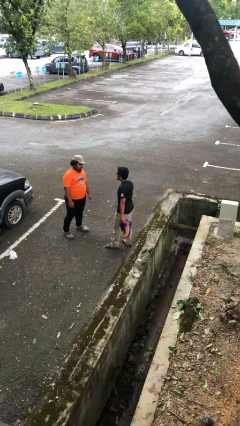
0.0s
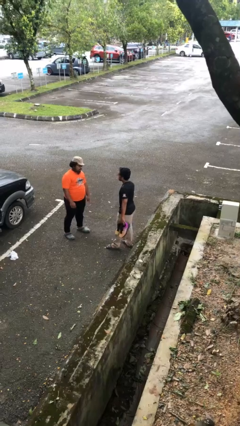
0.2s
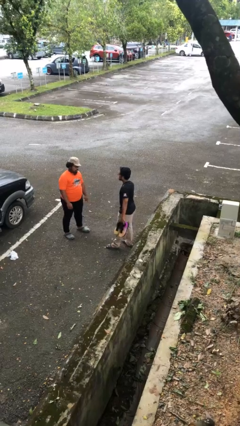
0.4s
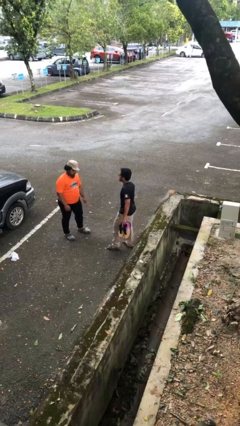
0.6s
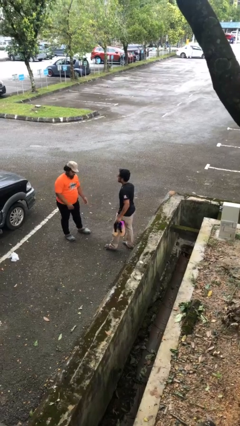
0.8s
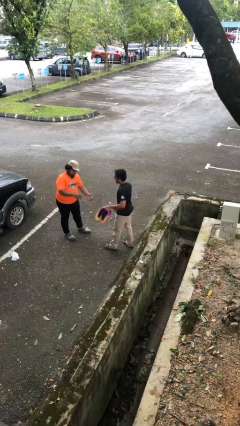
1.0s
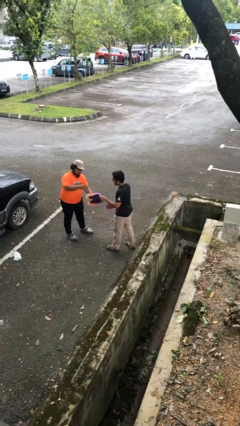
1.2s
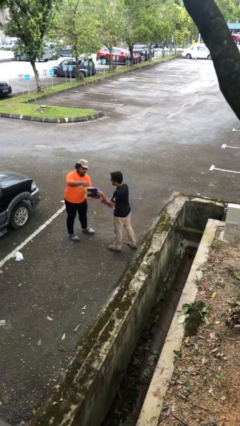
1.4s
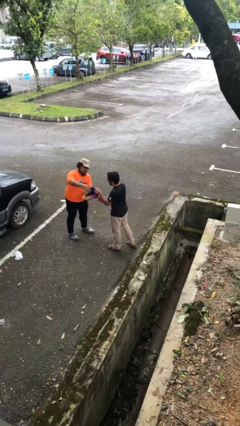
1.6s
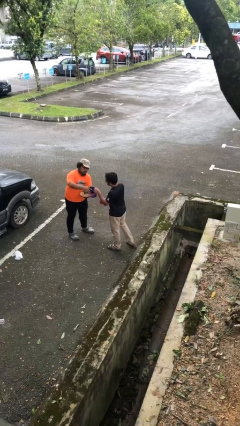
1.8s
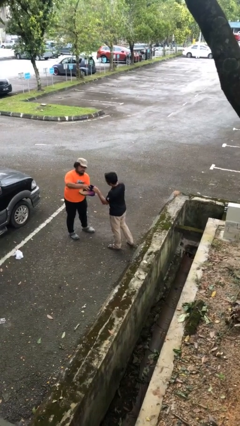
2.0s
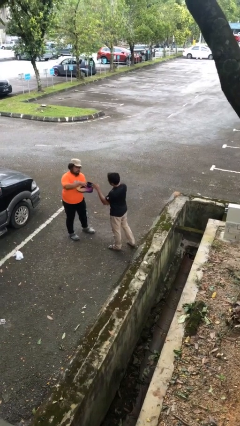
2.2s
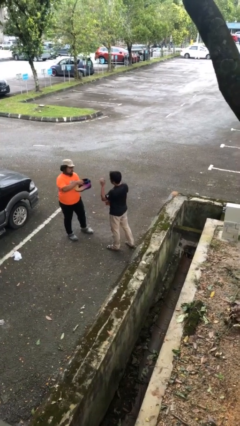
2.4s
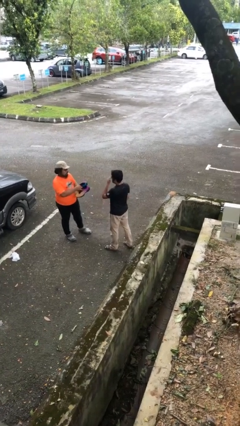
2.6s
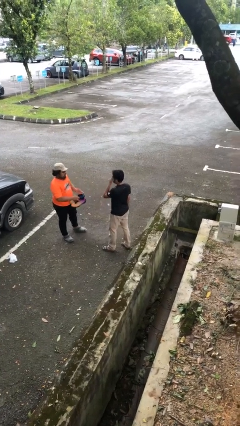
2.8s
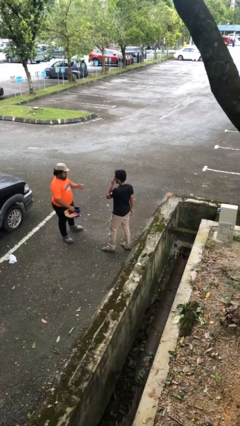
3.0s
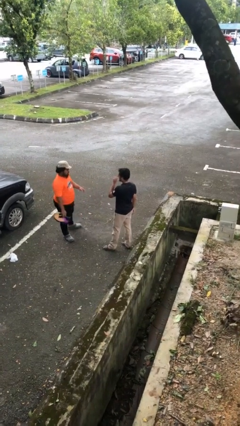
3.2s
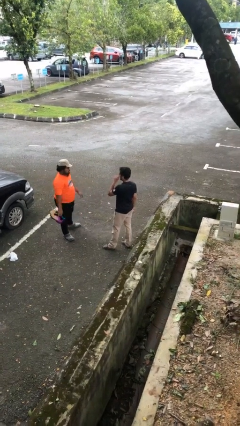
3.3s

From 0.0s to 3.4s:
person transfers object to person

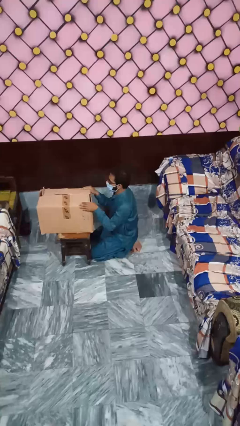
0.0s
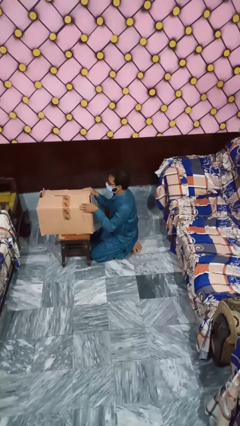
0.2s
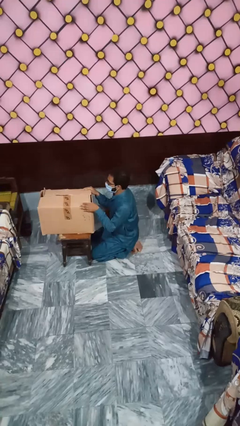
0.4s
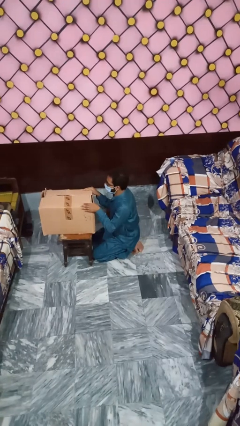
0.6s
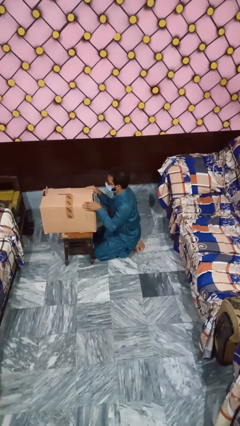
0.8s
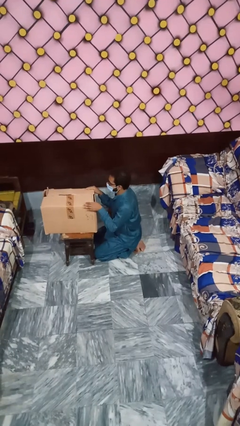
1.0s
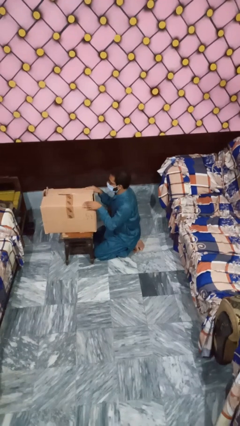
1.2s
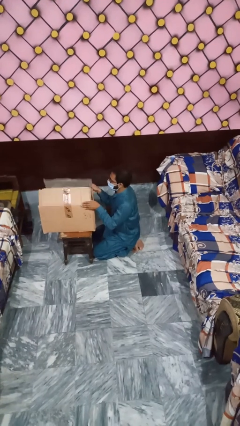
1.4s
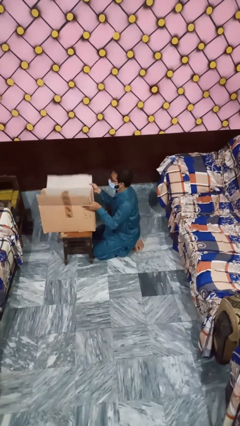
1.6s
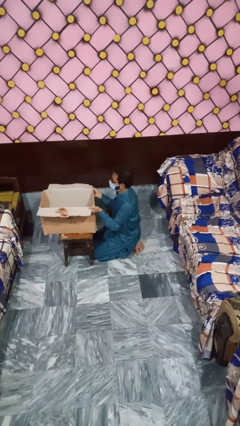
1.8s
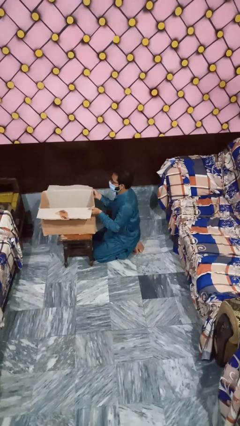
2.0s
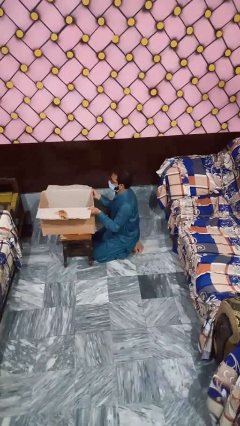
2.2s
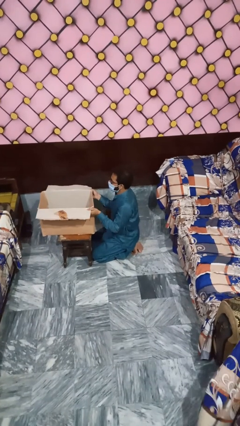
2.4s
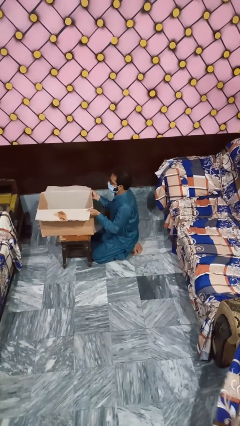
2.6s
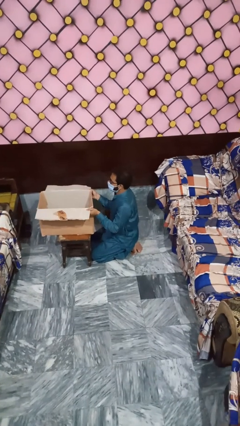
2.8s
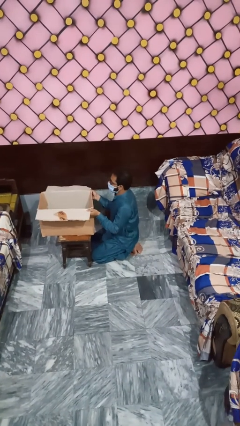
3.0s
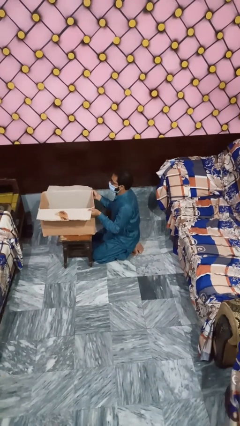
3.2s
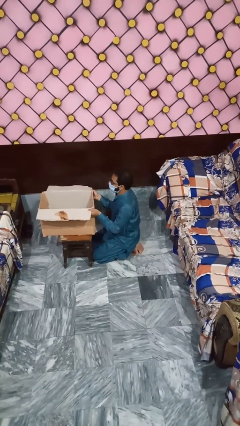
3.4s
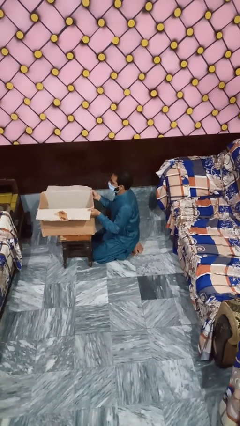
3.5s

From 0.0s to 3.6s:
person opens box

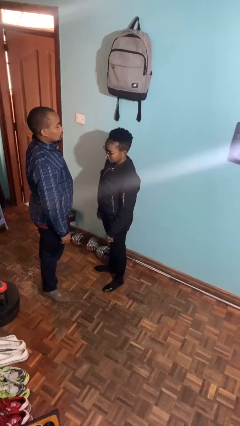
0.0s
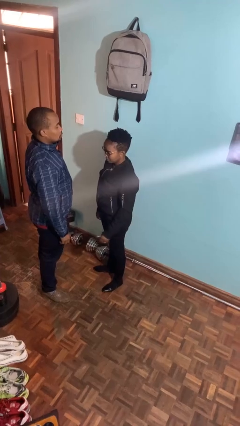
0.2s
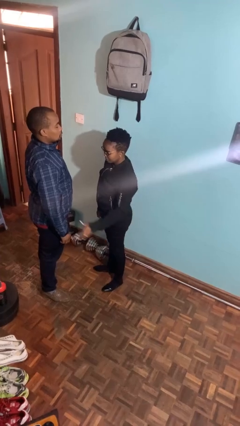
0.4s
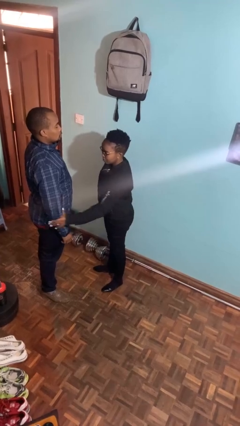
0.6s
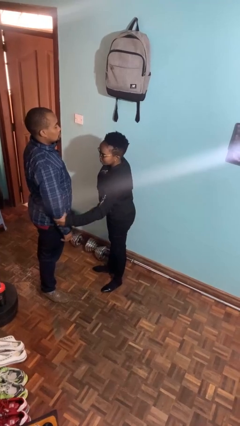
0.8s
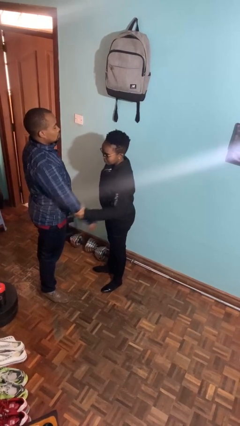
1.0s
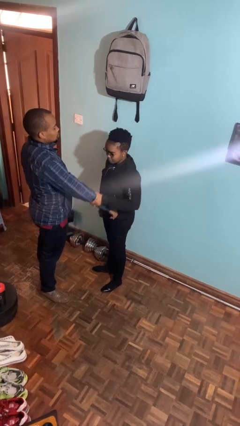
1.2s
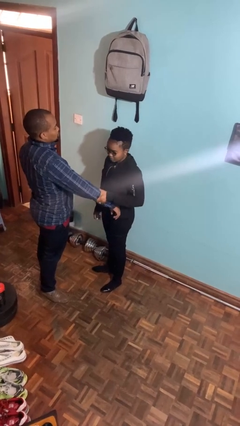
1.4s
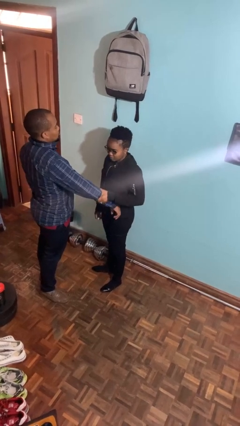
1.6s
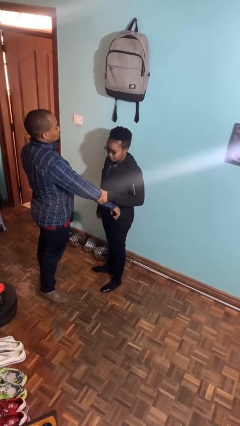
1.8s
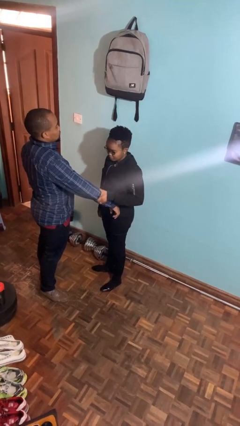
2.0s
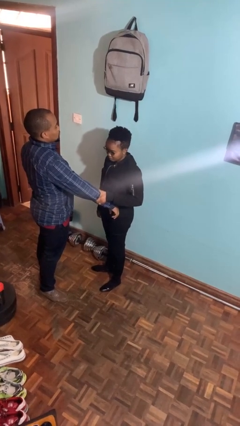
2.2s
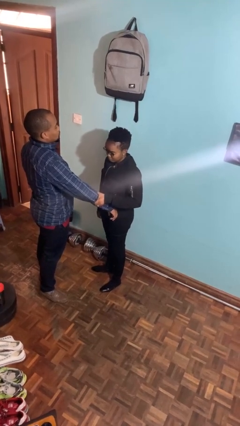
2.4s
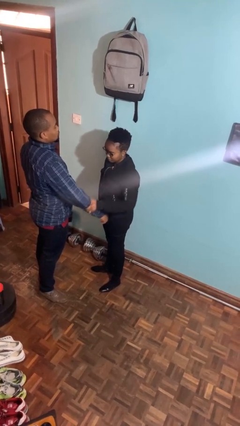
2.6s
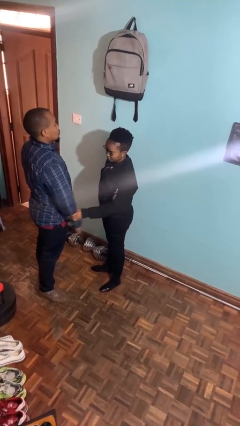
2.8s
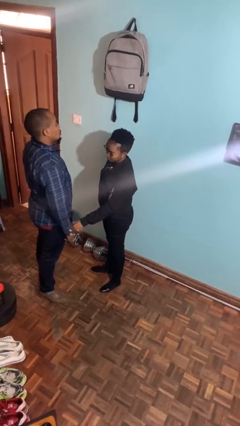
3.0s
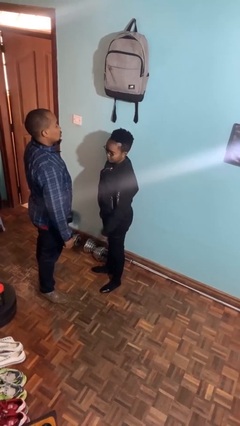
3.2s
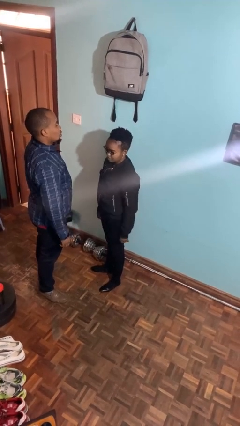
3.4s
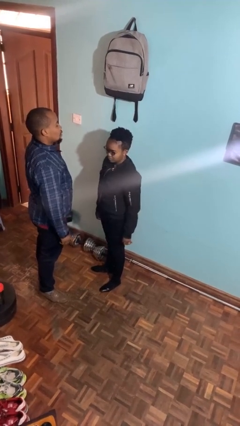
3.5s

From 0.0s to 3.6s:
person grabs person by forearm

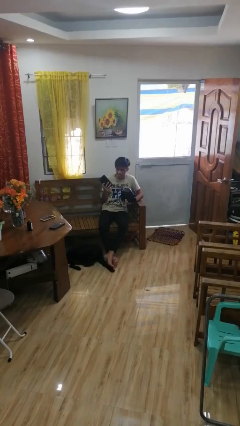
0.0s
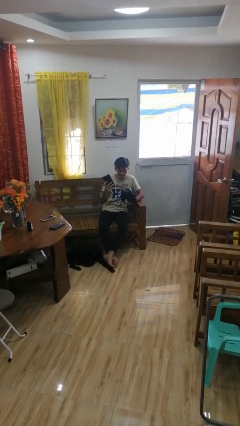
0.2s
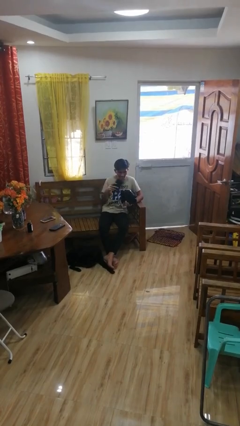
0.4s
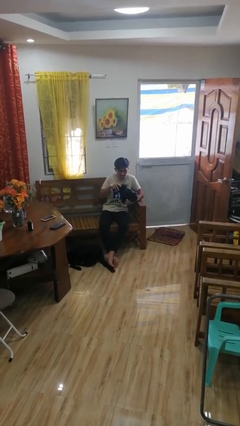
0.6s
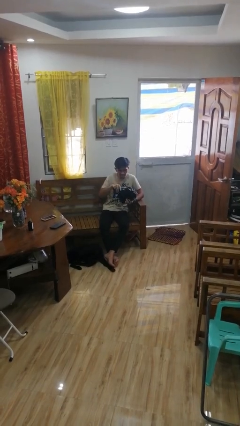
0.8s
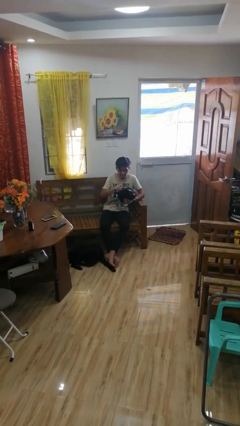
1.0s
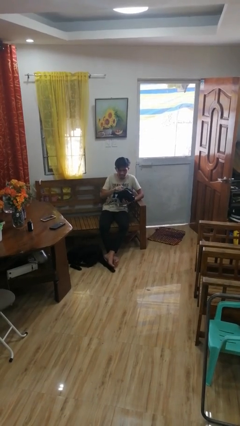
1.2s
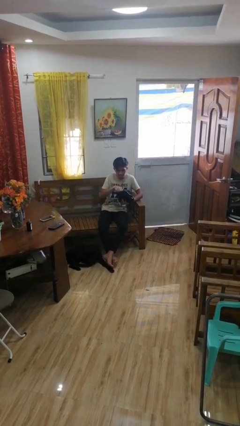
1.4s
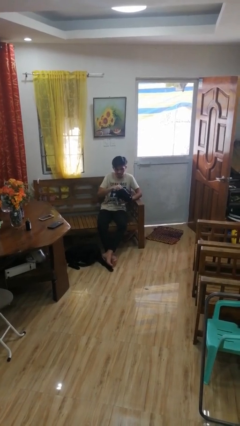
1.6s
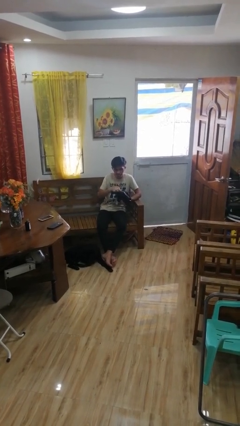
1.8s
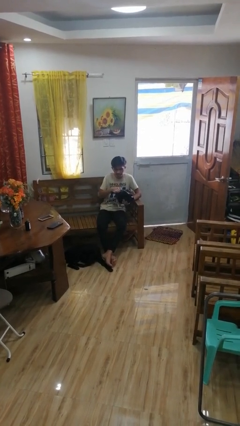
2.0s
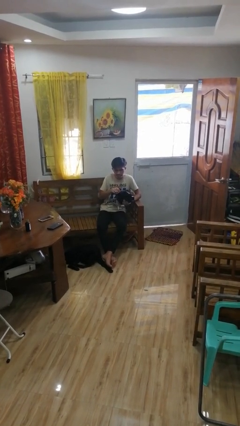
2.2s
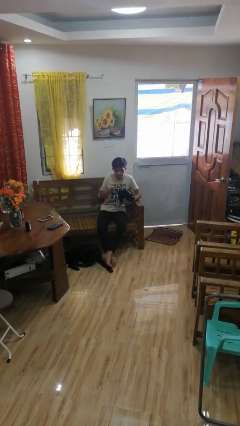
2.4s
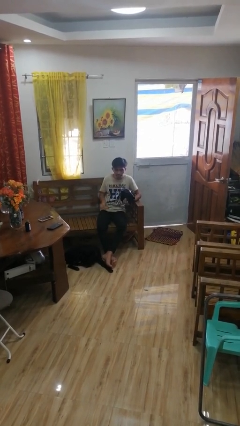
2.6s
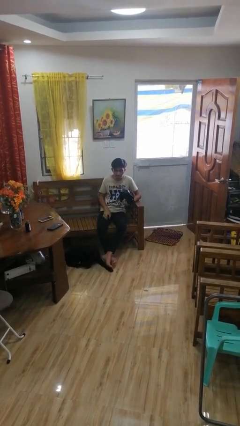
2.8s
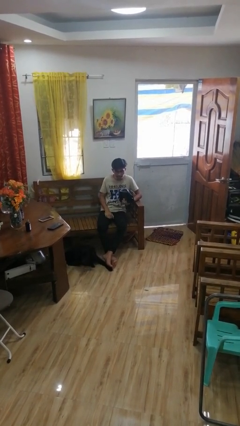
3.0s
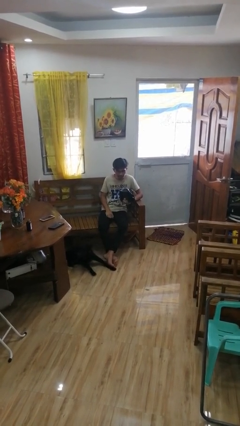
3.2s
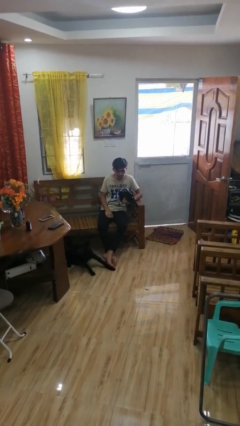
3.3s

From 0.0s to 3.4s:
person puts object into purse

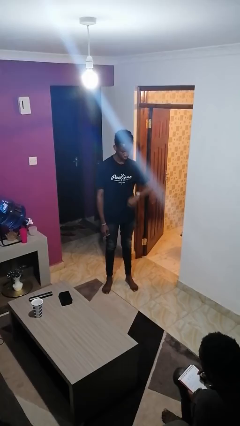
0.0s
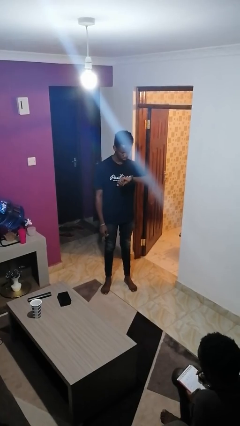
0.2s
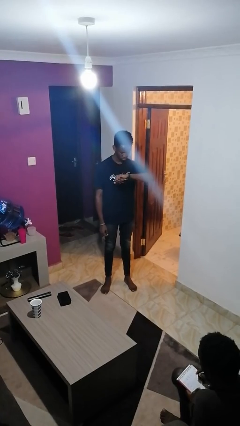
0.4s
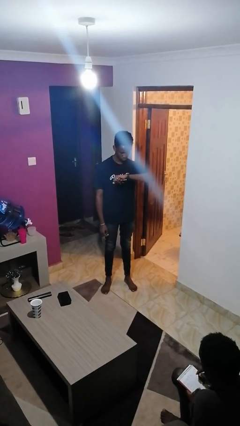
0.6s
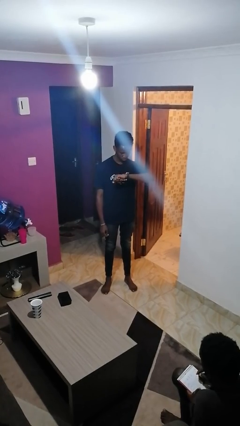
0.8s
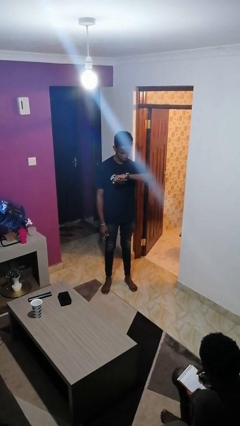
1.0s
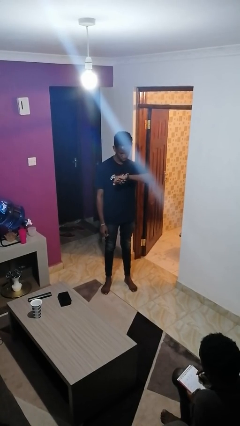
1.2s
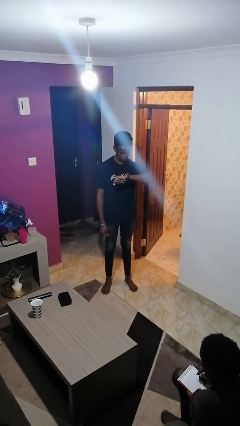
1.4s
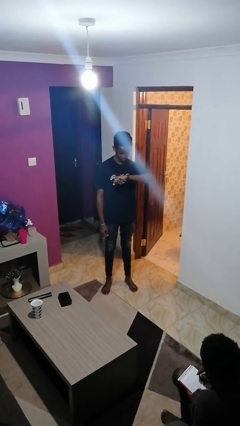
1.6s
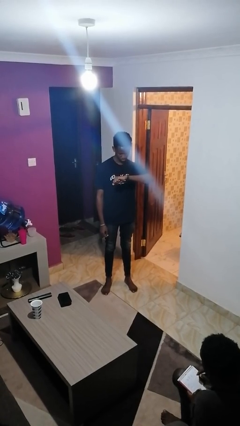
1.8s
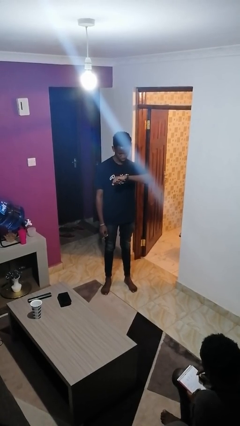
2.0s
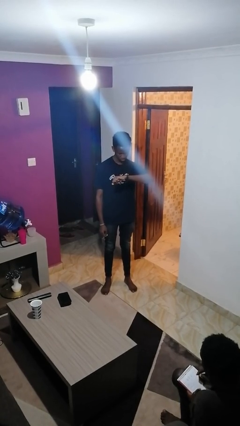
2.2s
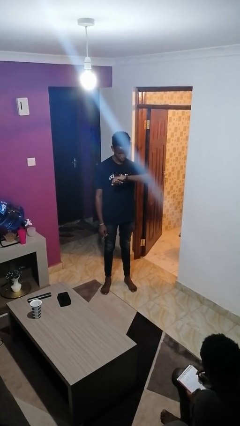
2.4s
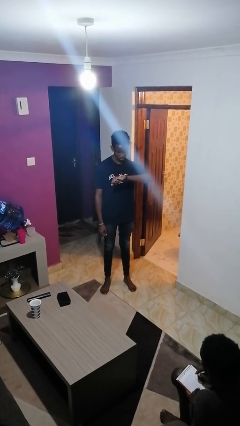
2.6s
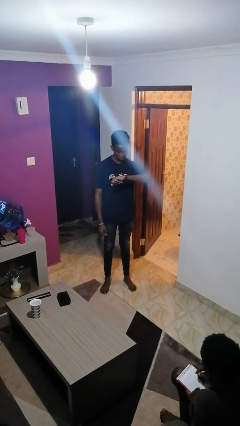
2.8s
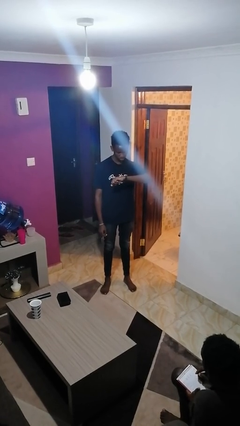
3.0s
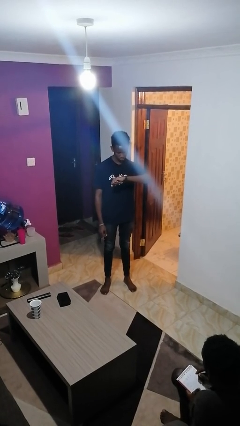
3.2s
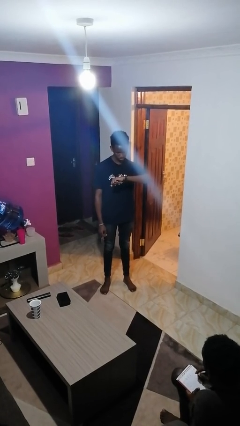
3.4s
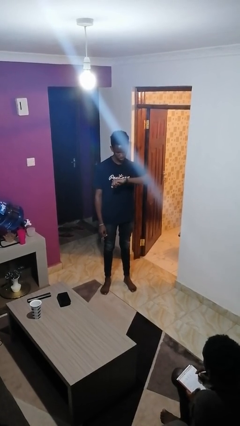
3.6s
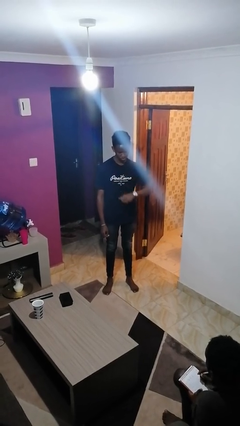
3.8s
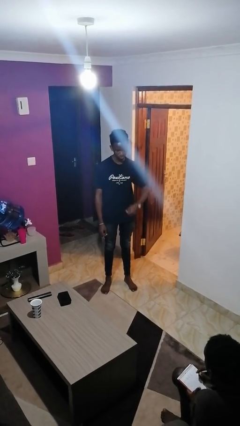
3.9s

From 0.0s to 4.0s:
person looks at wristwatch
